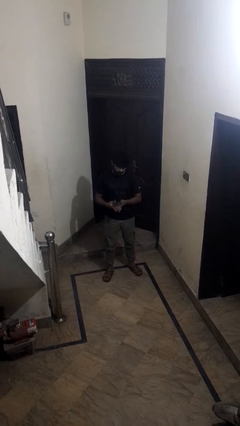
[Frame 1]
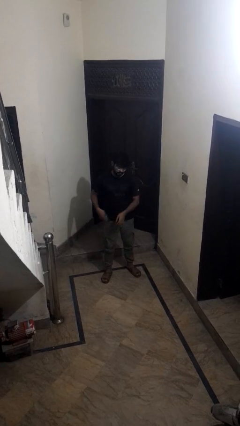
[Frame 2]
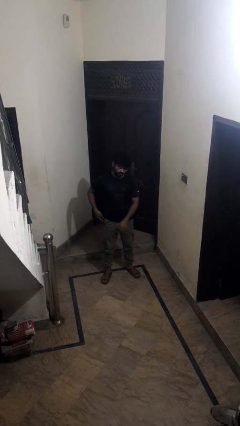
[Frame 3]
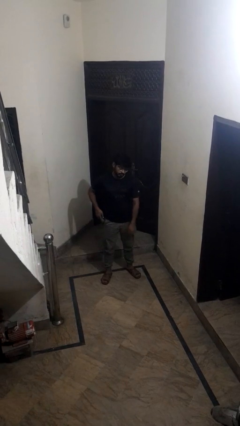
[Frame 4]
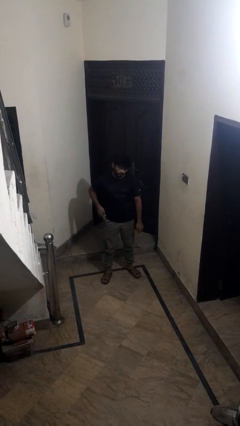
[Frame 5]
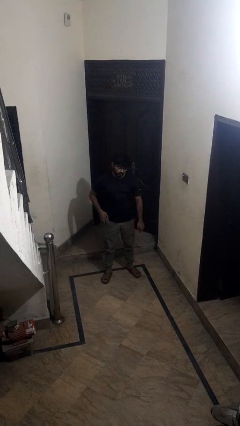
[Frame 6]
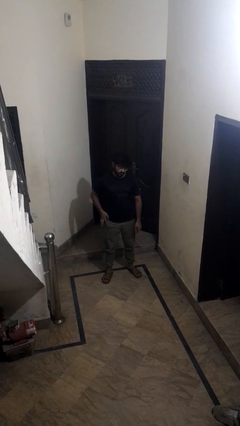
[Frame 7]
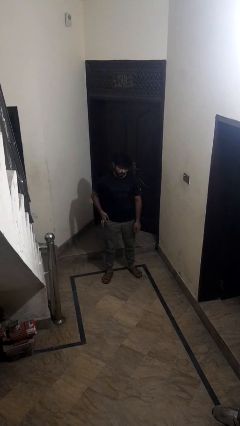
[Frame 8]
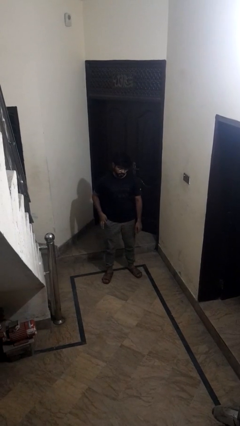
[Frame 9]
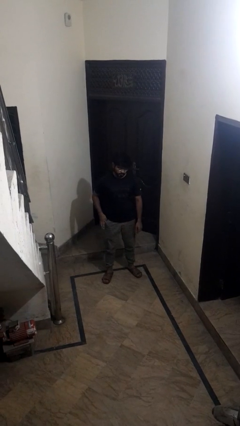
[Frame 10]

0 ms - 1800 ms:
person puts phone into pocket

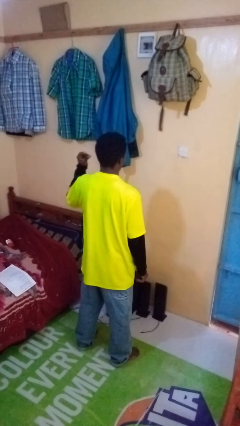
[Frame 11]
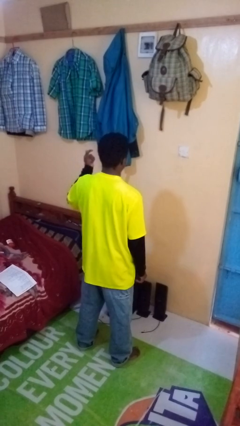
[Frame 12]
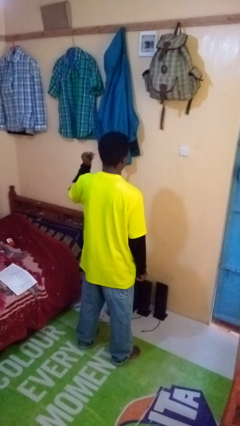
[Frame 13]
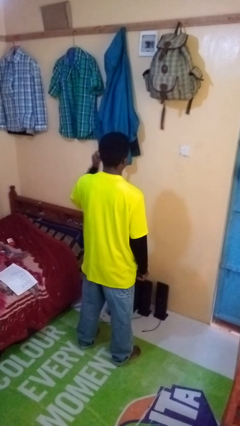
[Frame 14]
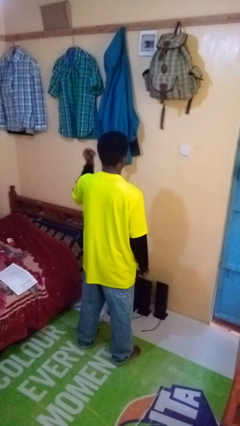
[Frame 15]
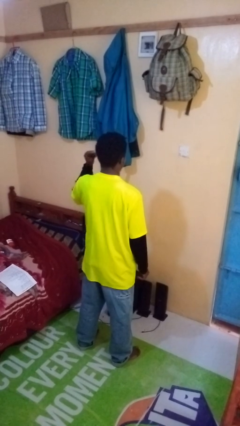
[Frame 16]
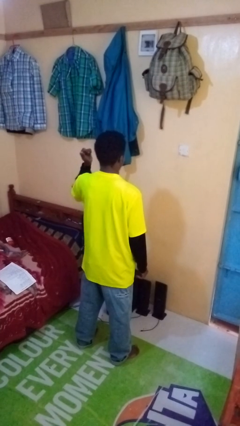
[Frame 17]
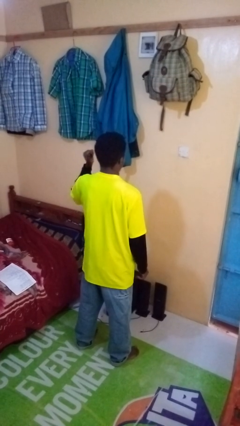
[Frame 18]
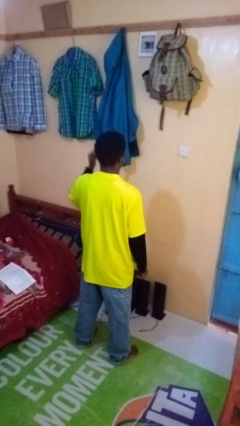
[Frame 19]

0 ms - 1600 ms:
person snaps fingers

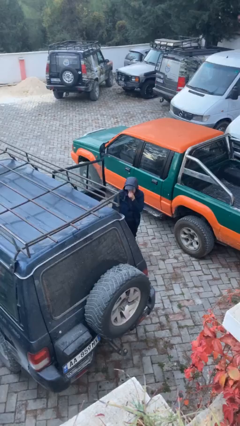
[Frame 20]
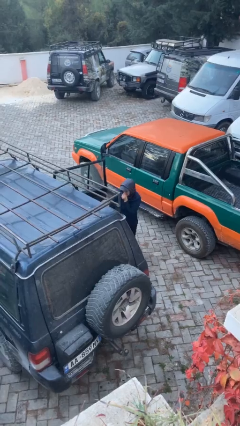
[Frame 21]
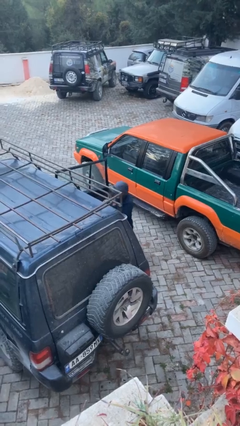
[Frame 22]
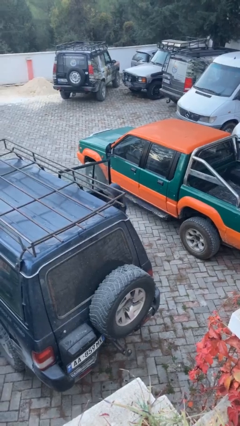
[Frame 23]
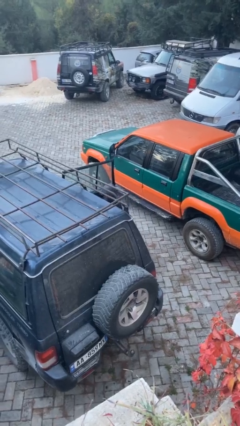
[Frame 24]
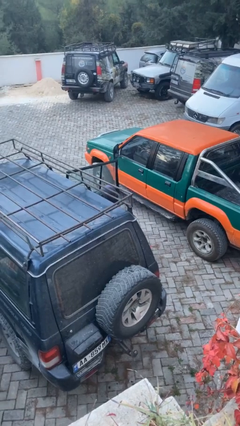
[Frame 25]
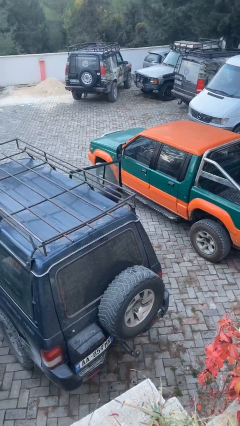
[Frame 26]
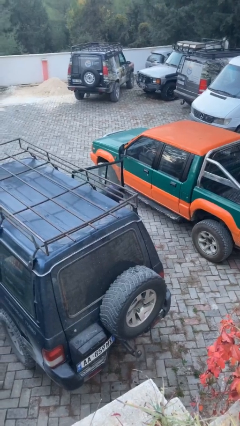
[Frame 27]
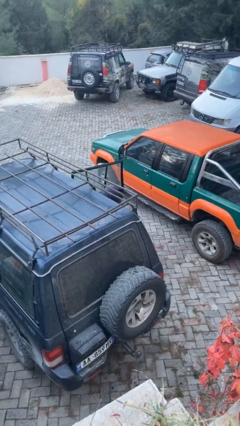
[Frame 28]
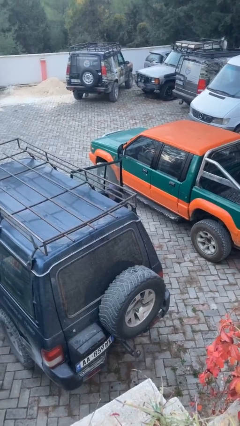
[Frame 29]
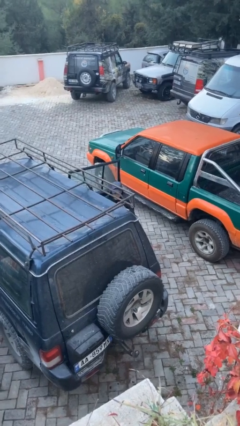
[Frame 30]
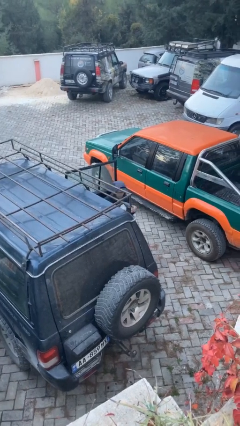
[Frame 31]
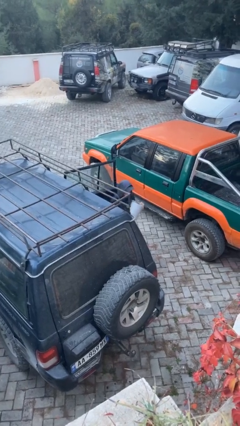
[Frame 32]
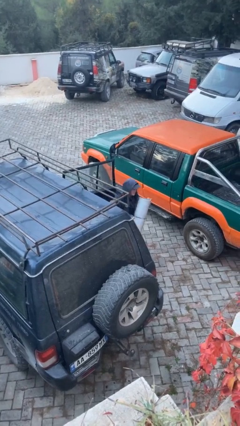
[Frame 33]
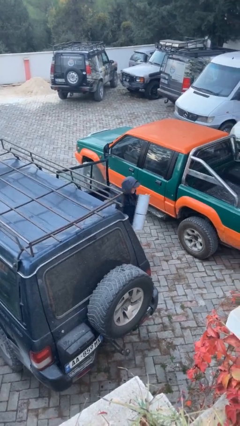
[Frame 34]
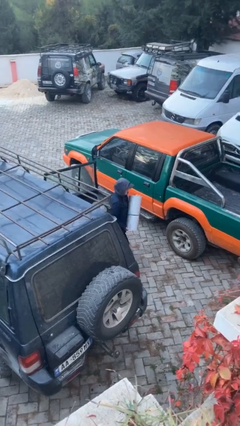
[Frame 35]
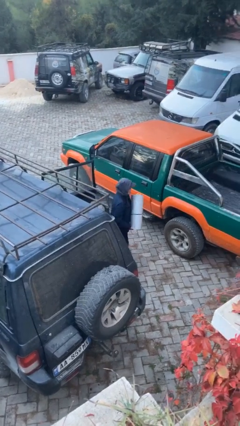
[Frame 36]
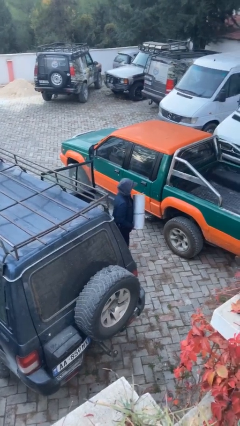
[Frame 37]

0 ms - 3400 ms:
person unloads car

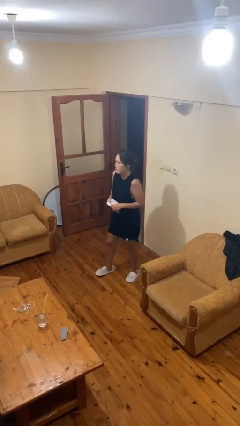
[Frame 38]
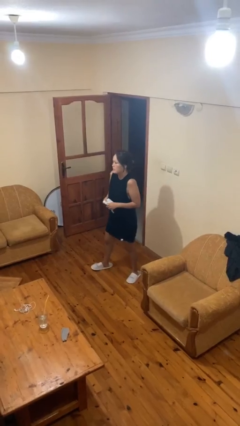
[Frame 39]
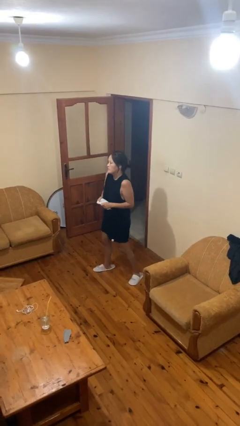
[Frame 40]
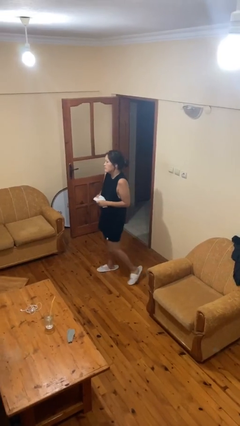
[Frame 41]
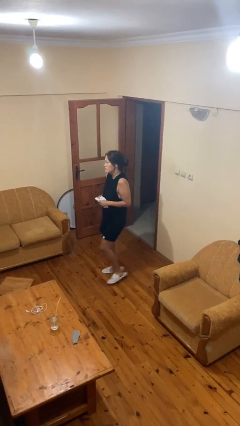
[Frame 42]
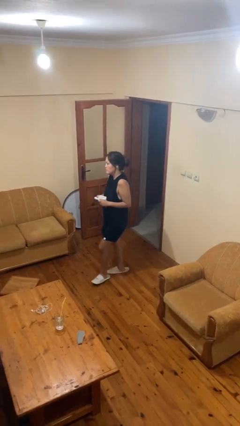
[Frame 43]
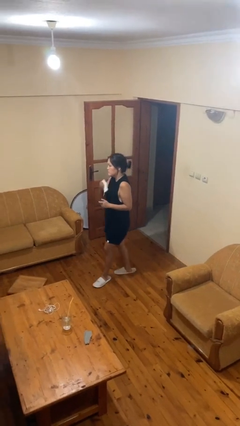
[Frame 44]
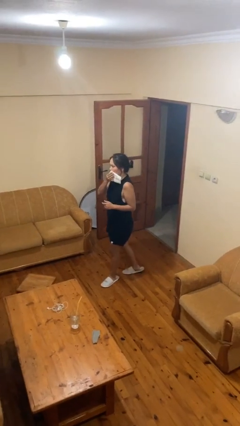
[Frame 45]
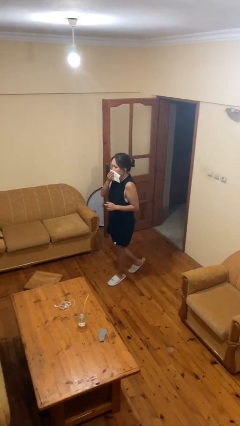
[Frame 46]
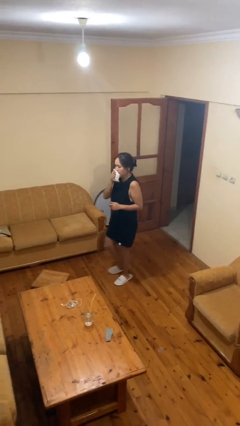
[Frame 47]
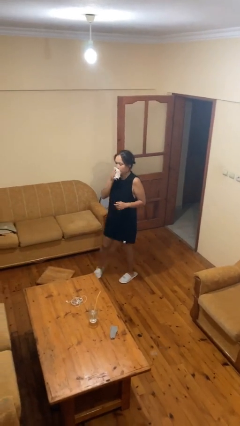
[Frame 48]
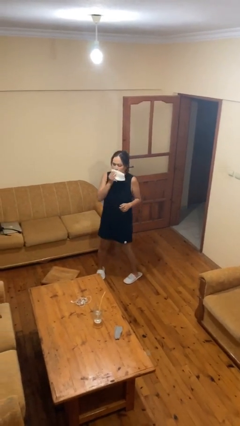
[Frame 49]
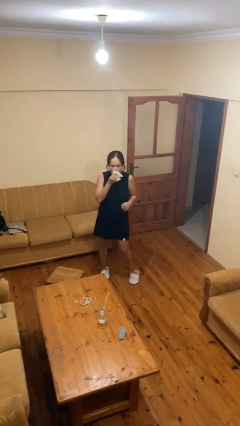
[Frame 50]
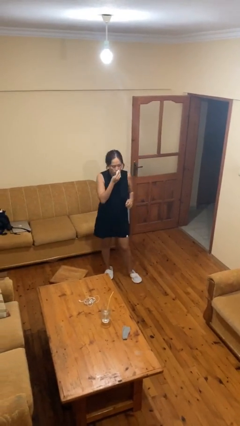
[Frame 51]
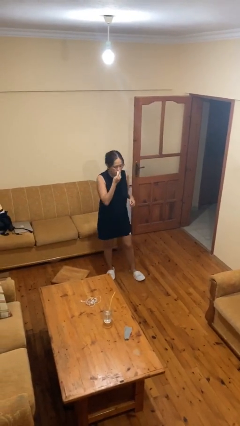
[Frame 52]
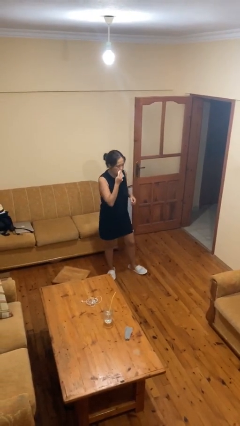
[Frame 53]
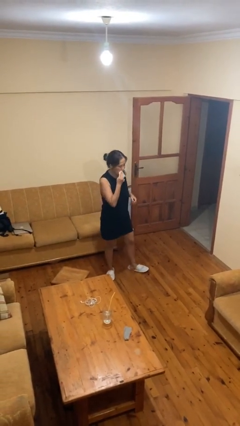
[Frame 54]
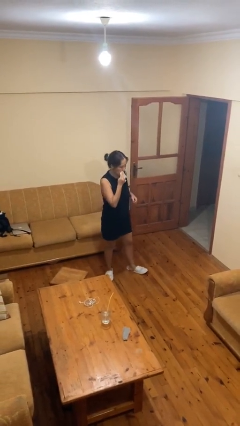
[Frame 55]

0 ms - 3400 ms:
person wipes mouth with napkin

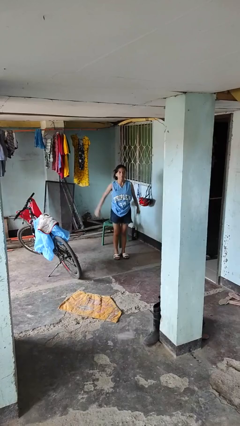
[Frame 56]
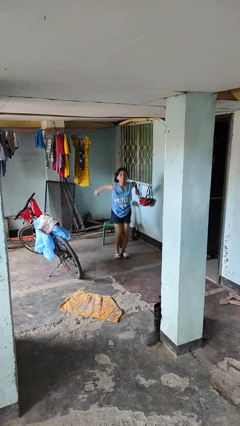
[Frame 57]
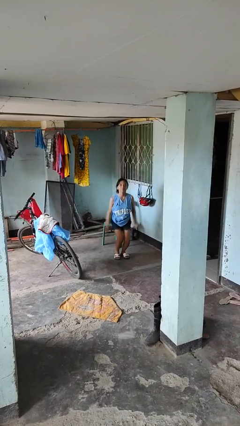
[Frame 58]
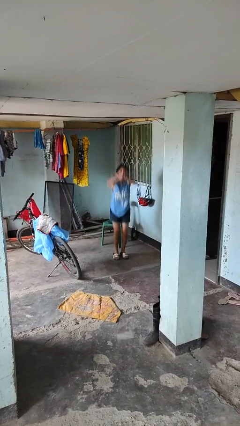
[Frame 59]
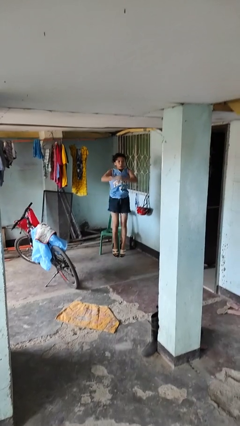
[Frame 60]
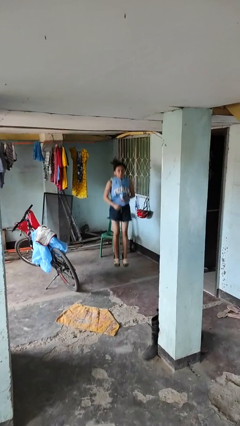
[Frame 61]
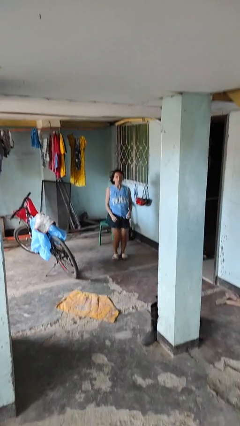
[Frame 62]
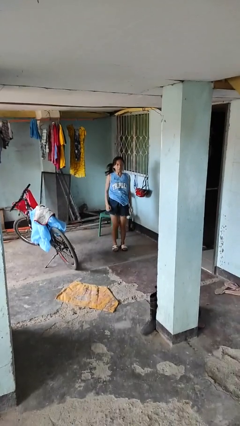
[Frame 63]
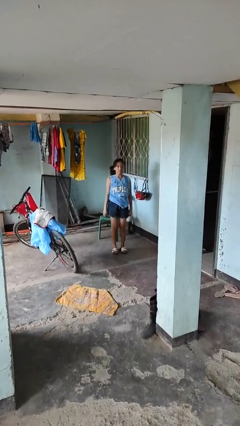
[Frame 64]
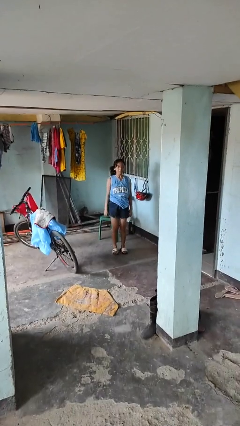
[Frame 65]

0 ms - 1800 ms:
person jumps

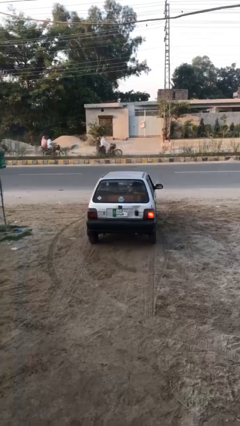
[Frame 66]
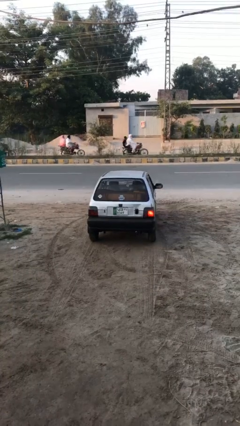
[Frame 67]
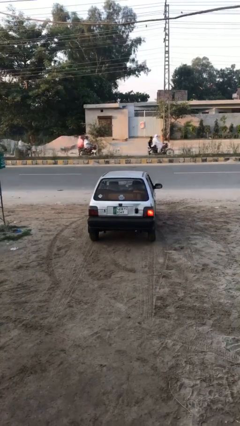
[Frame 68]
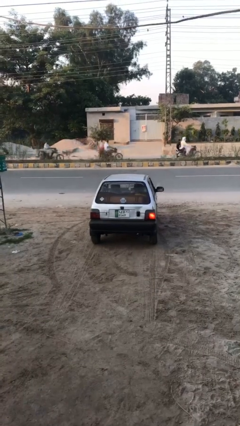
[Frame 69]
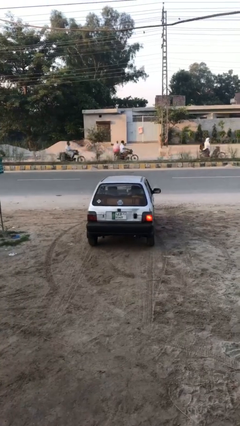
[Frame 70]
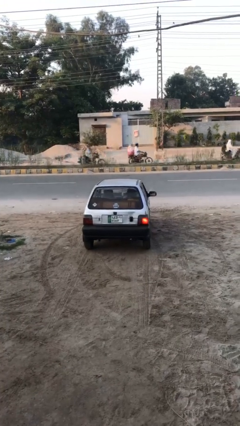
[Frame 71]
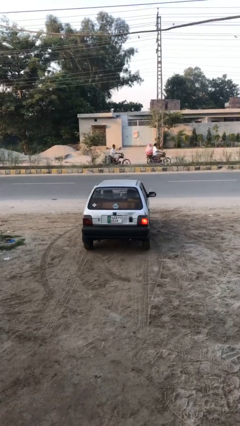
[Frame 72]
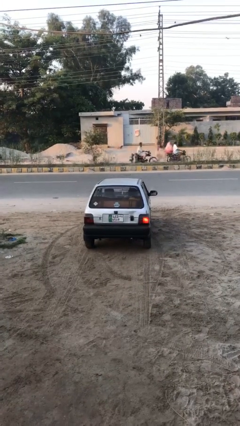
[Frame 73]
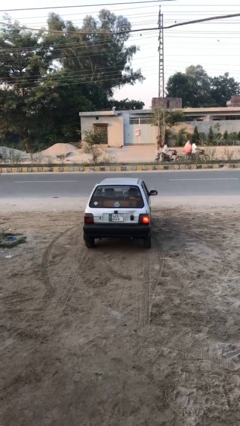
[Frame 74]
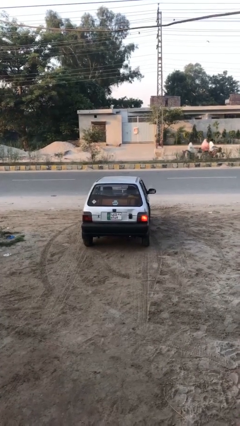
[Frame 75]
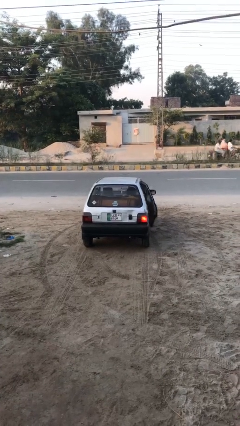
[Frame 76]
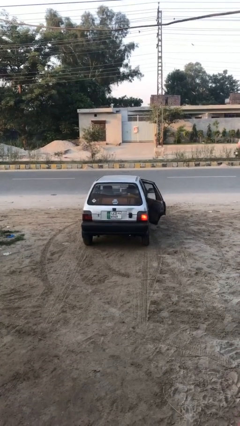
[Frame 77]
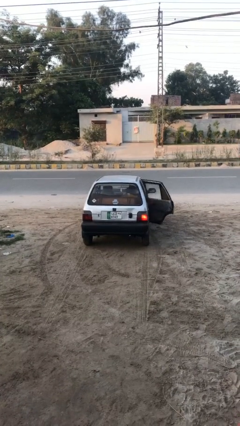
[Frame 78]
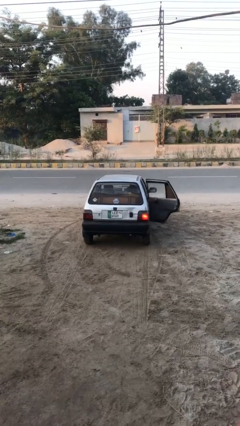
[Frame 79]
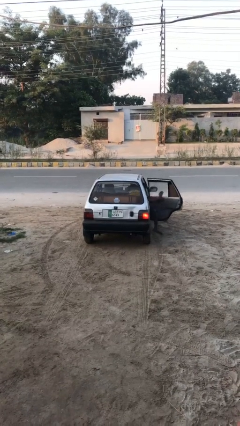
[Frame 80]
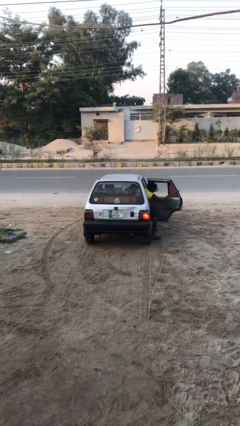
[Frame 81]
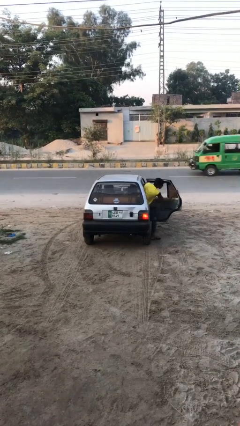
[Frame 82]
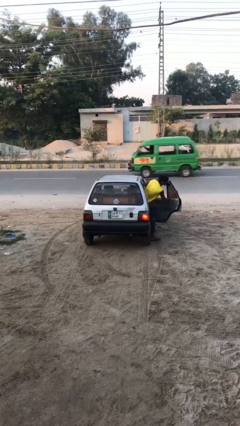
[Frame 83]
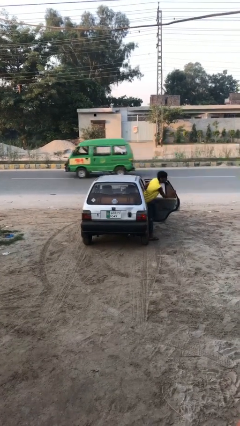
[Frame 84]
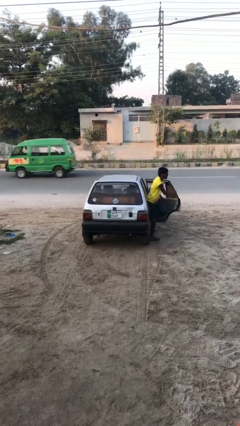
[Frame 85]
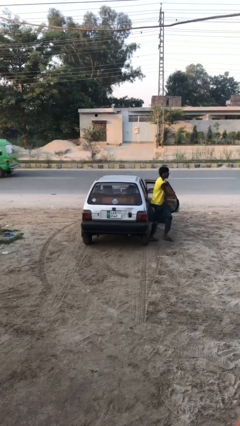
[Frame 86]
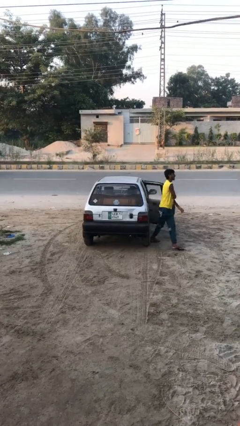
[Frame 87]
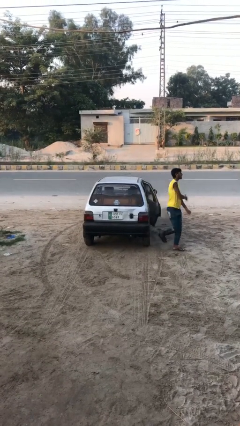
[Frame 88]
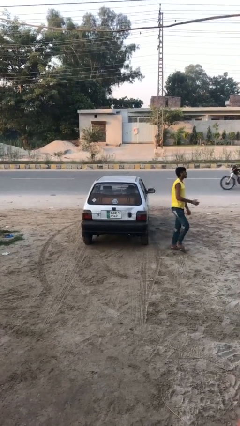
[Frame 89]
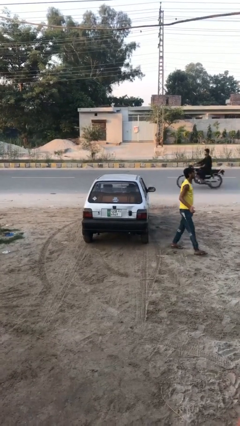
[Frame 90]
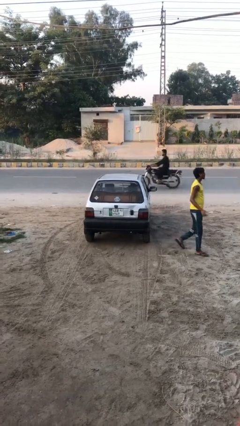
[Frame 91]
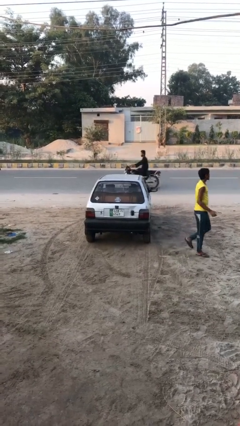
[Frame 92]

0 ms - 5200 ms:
car drops off person

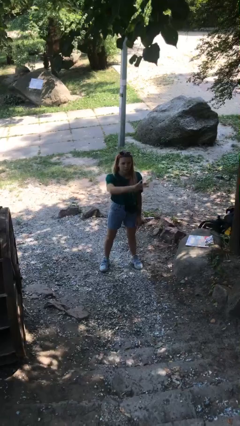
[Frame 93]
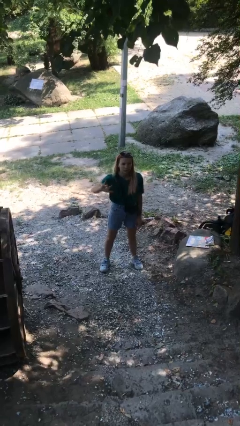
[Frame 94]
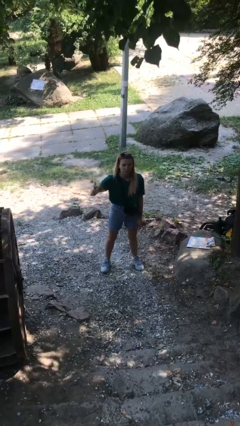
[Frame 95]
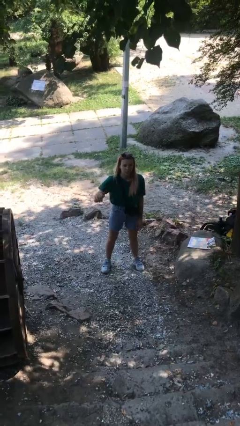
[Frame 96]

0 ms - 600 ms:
person gestures swipe right
